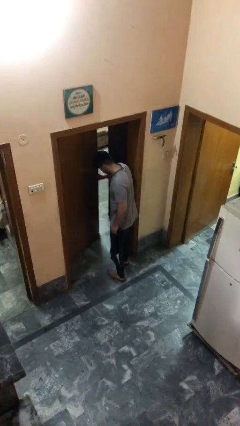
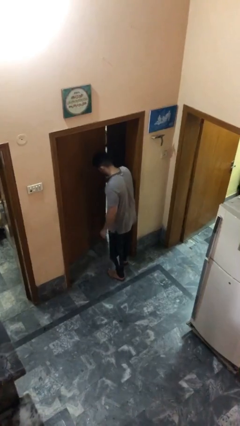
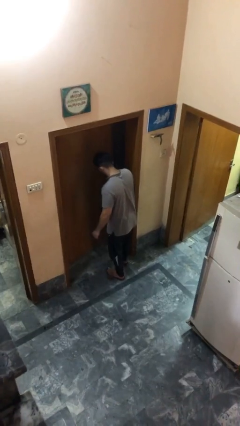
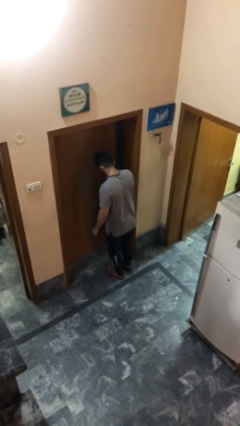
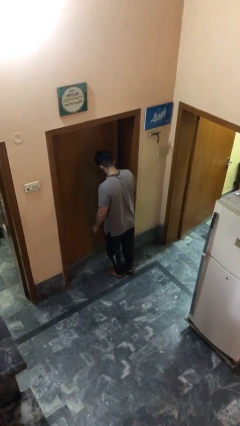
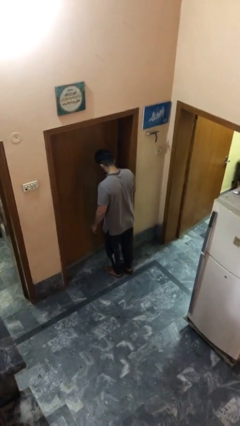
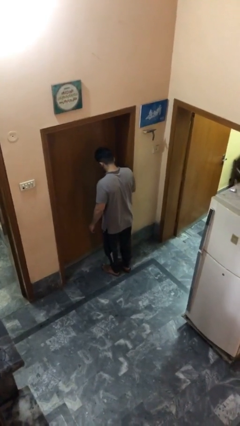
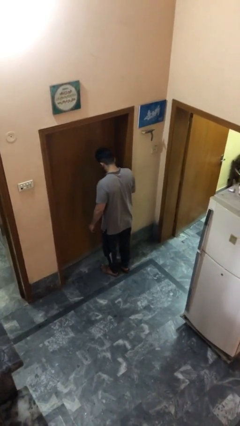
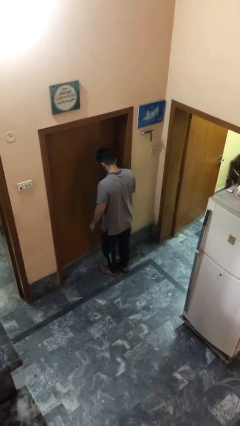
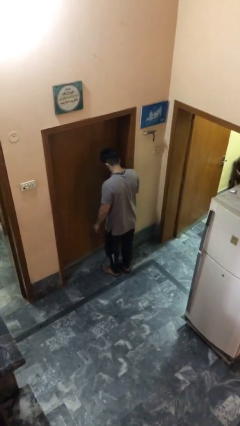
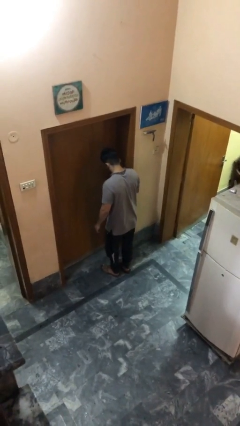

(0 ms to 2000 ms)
person closes facility door

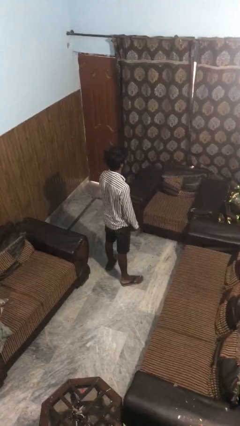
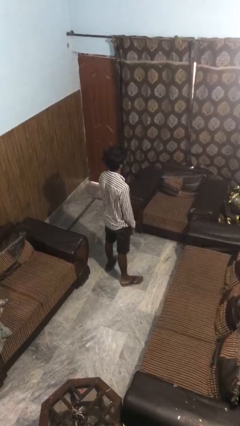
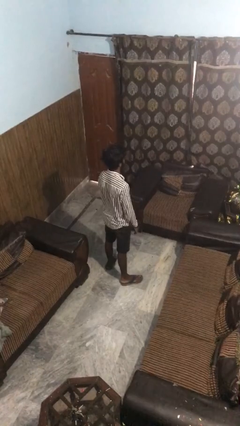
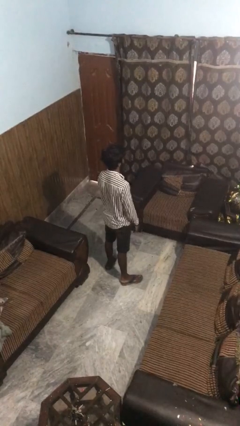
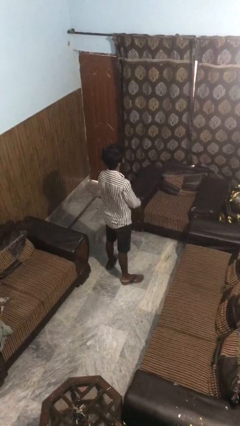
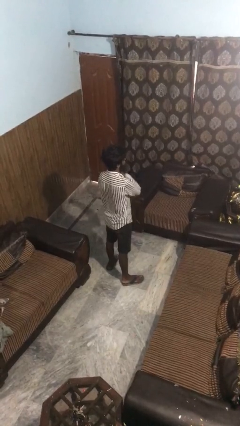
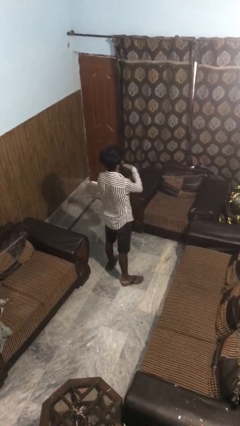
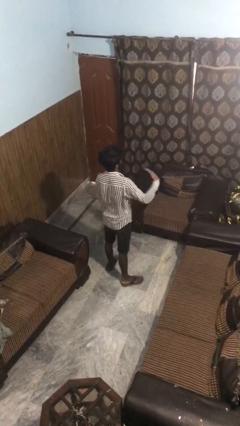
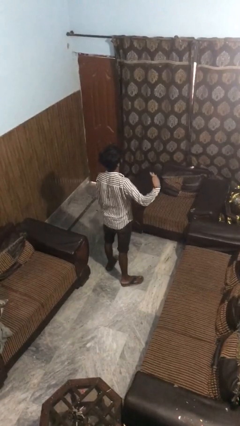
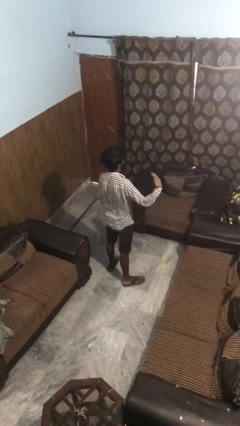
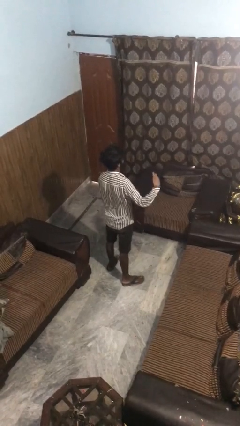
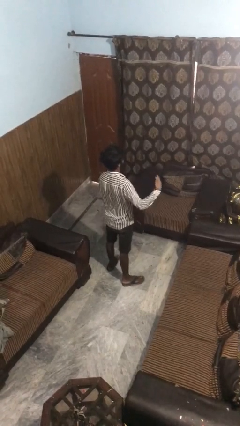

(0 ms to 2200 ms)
person gestures cut

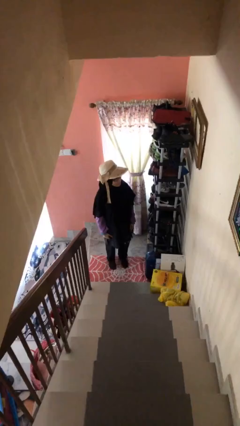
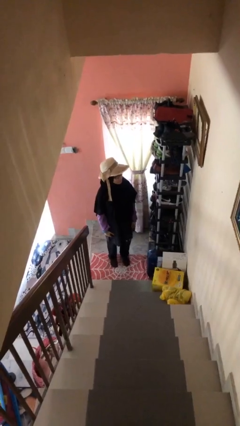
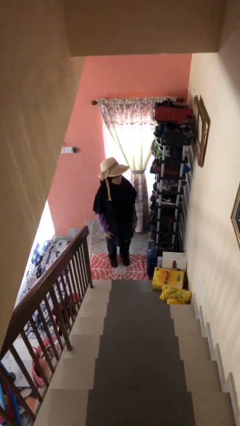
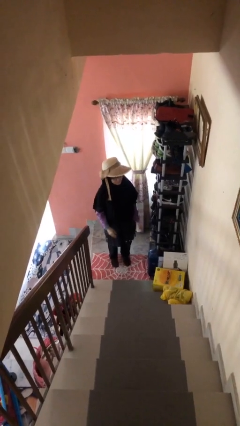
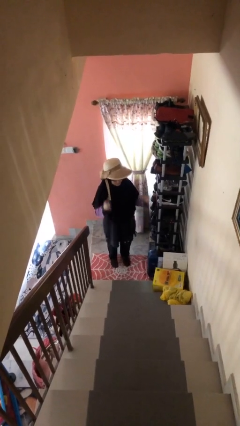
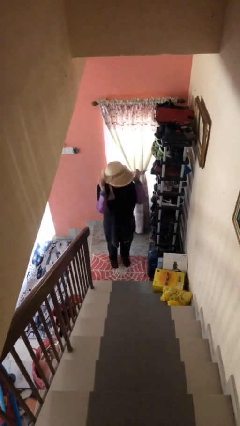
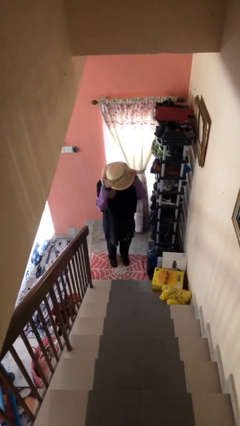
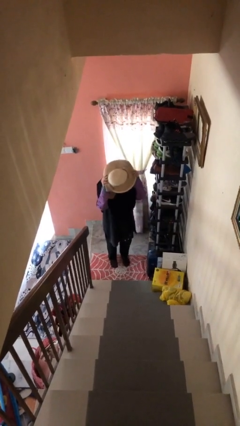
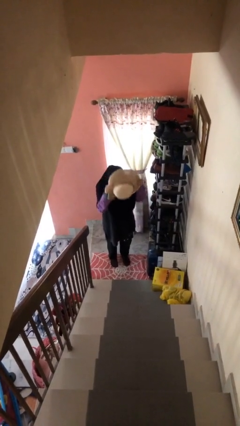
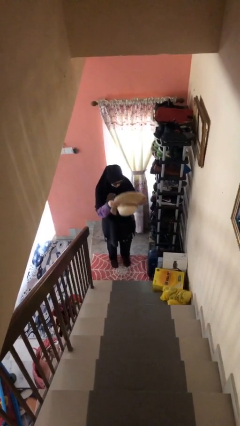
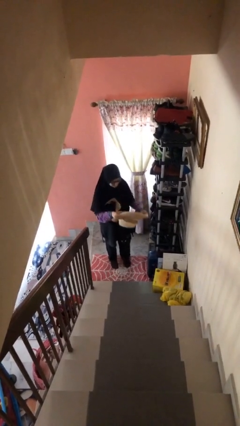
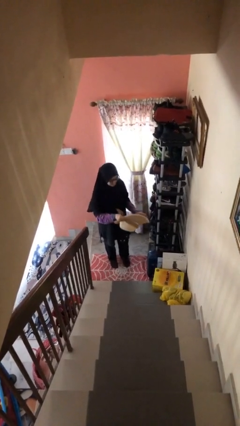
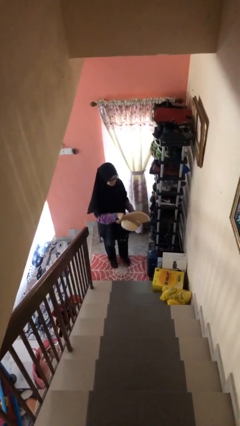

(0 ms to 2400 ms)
person takes off hat

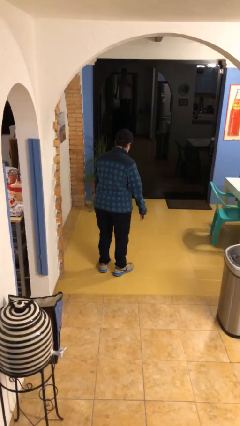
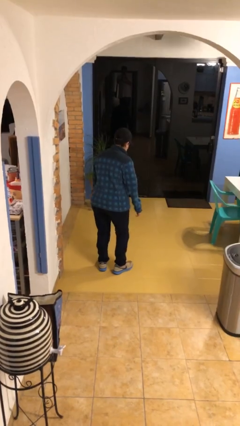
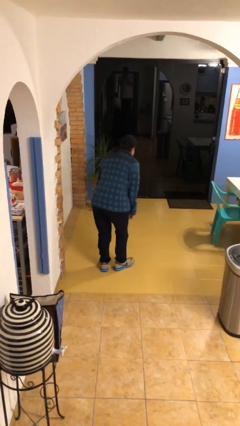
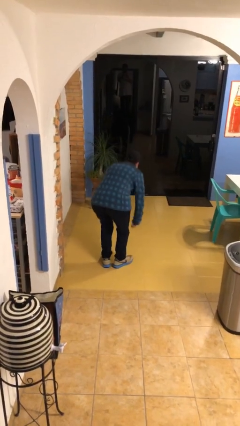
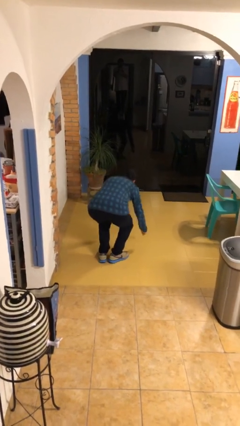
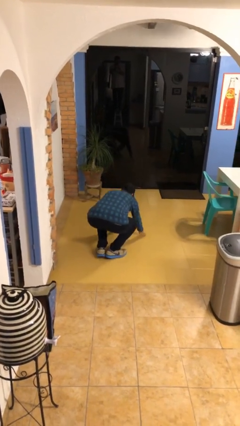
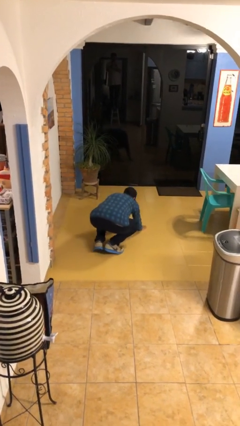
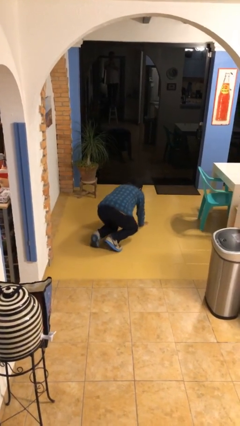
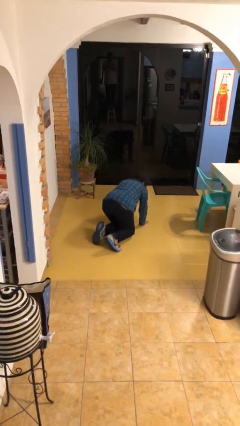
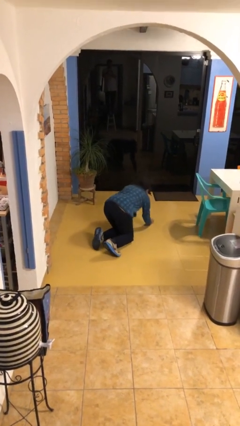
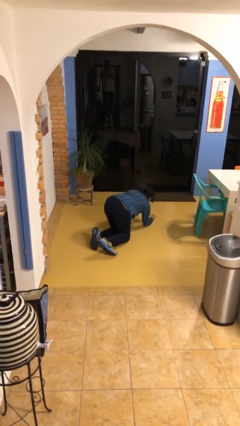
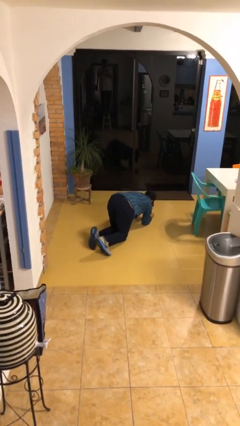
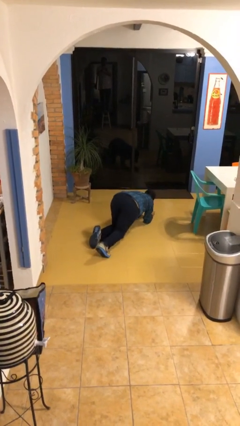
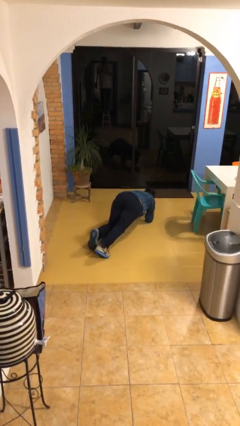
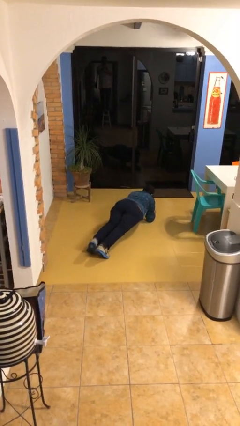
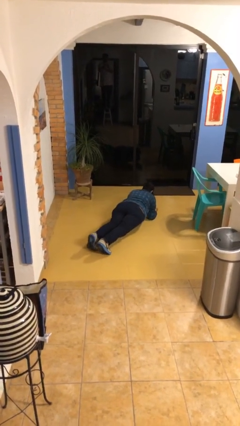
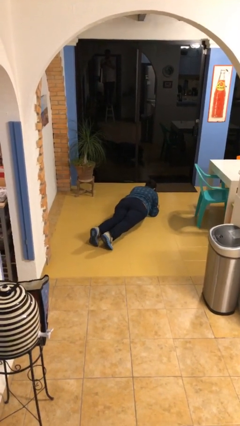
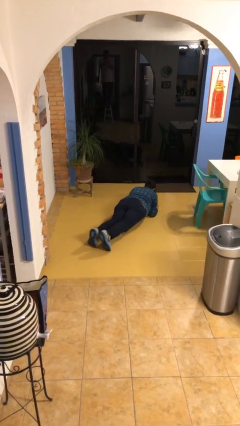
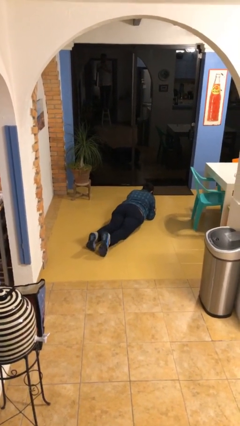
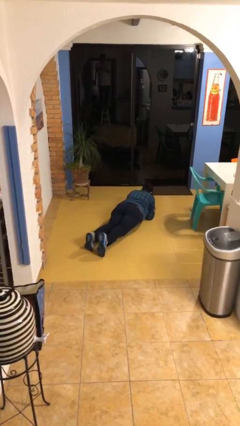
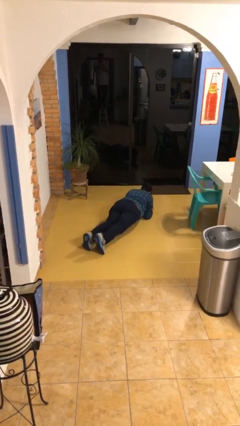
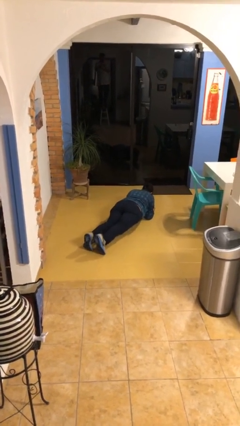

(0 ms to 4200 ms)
person exercises with plank

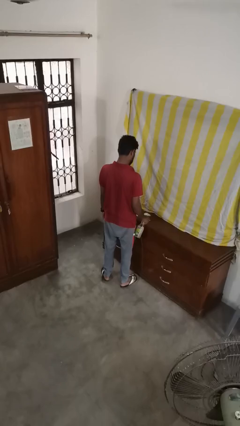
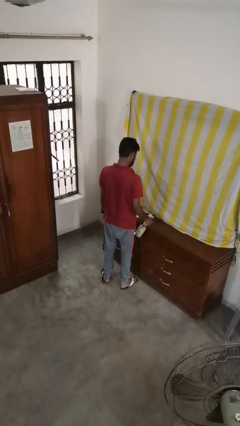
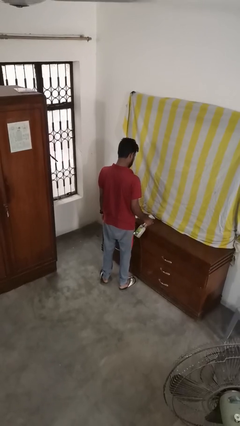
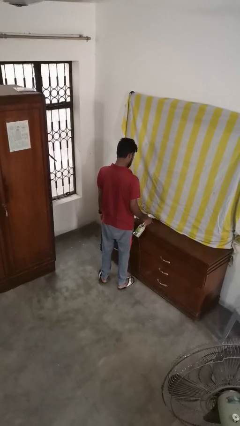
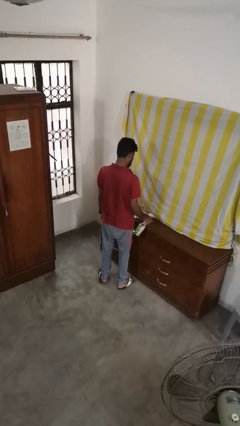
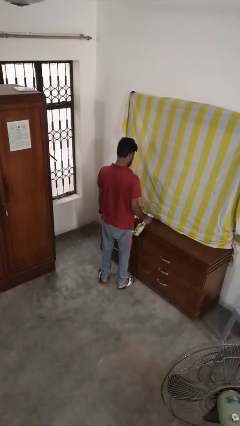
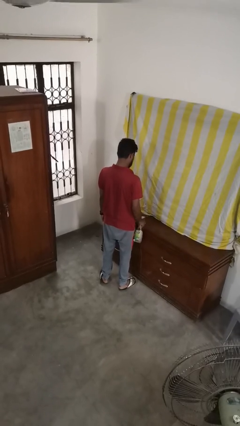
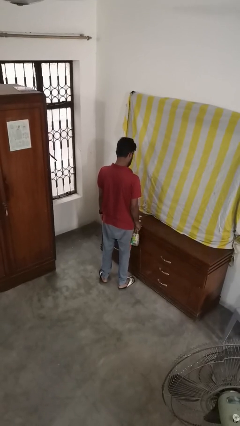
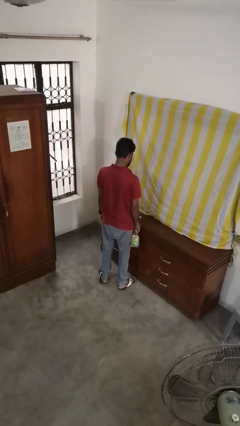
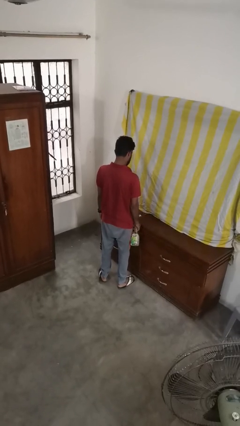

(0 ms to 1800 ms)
person sprays from bottle

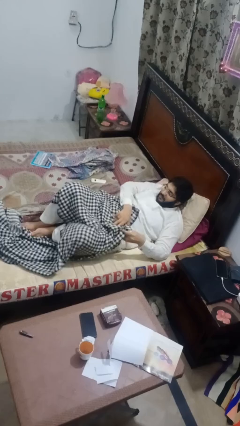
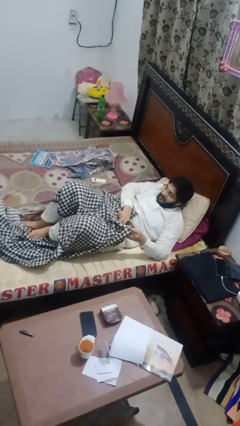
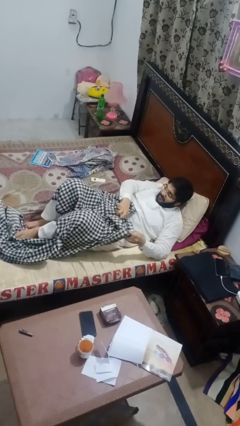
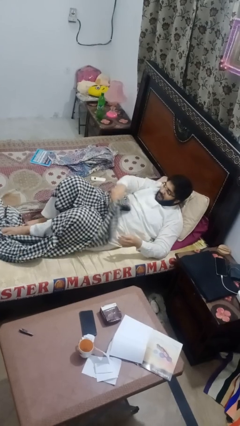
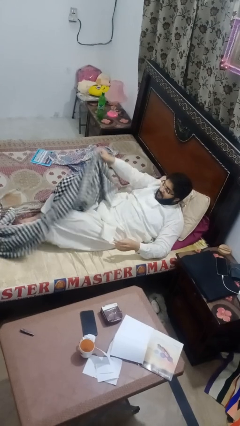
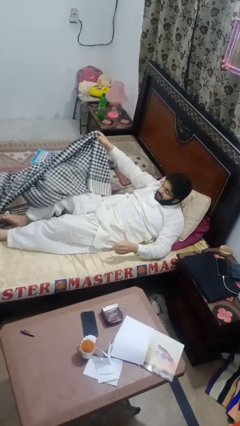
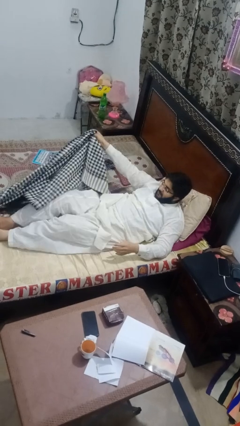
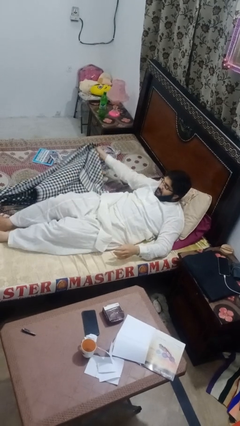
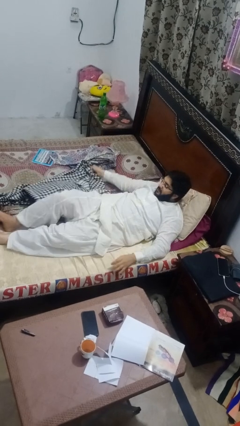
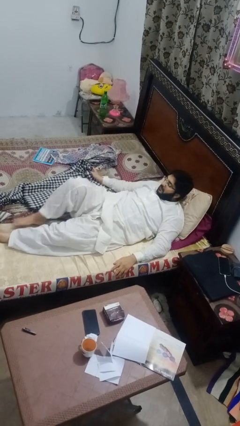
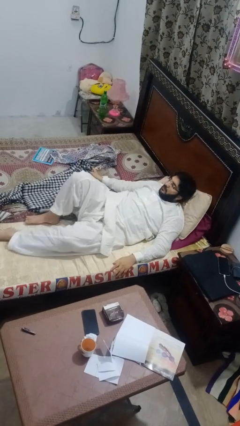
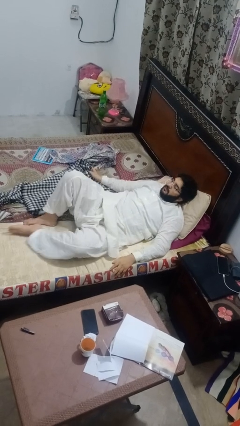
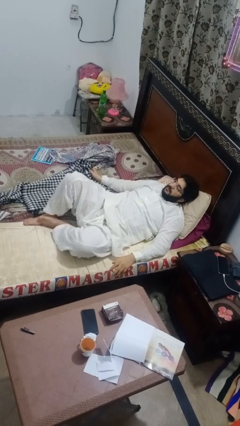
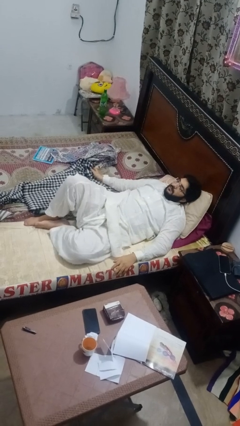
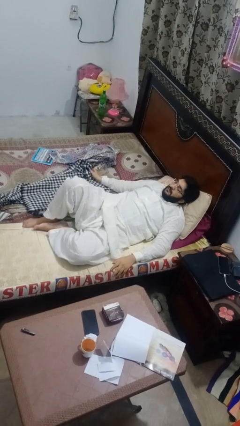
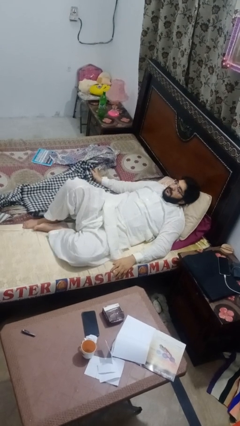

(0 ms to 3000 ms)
person uncovers with blanket

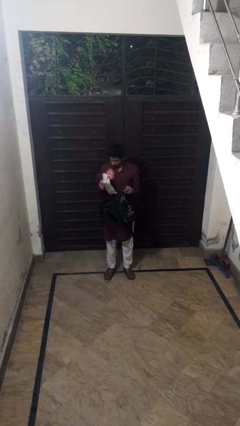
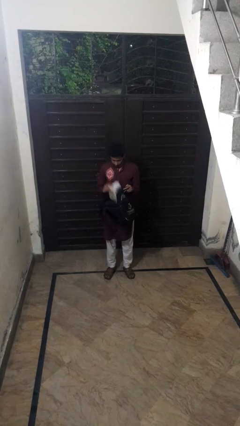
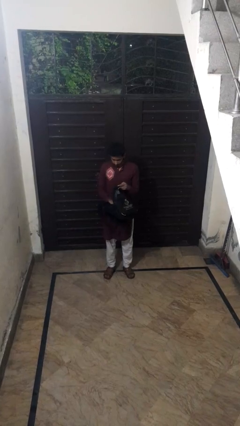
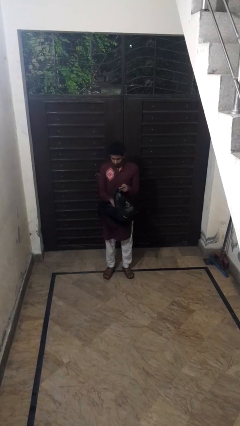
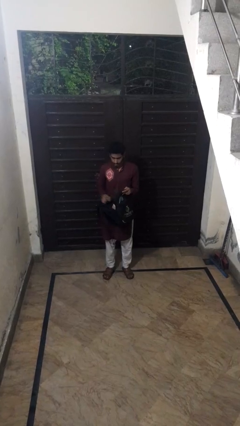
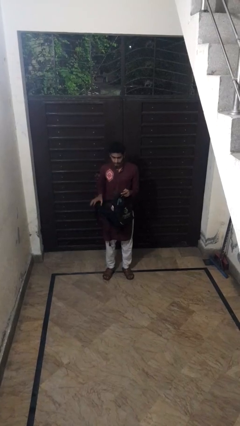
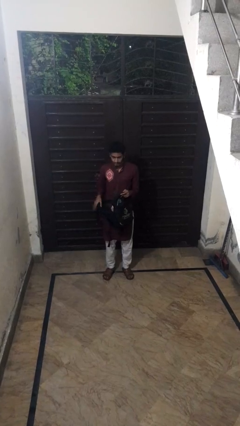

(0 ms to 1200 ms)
person puts object into backpack
